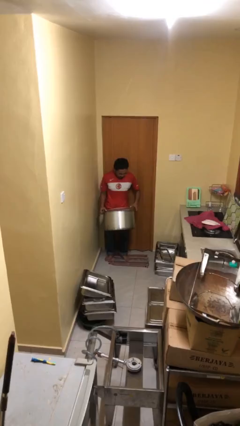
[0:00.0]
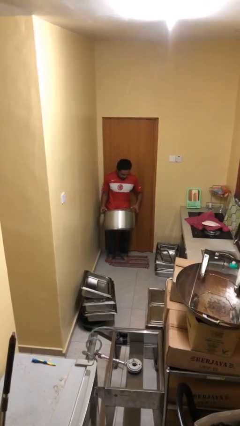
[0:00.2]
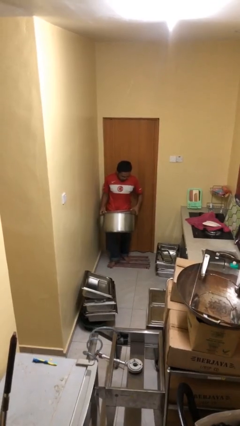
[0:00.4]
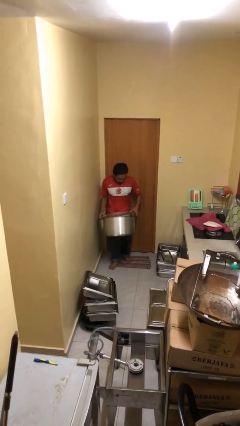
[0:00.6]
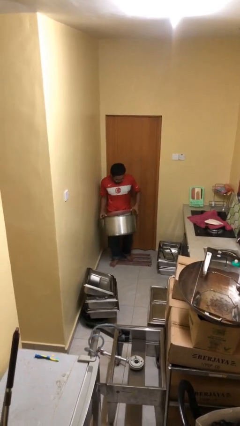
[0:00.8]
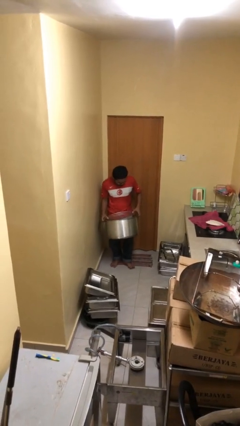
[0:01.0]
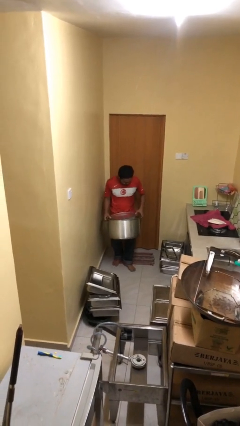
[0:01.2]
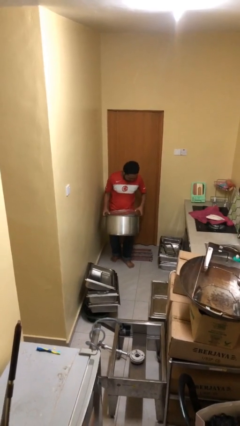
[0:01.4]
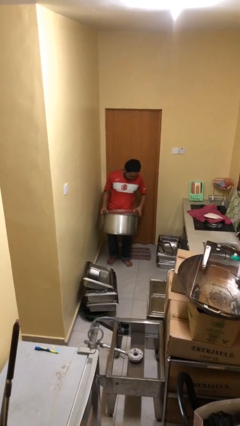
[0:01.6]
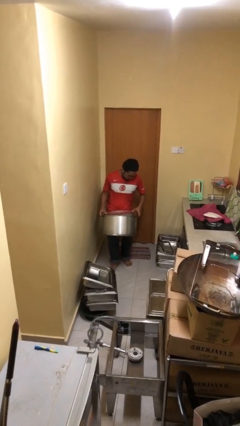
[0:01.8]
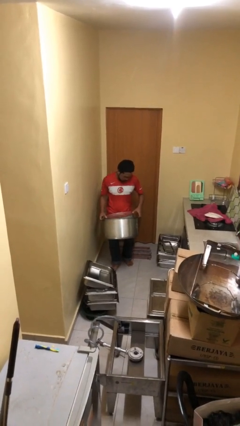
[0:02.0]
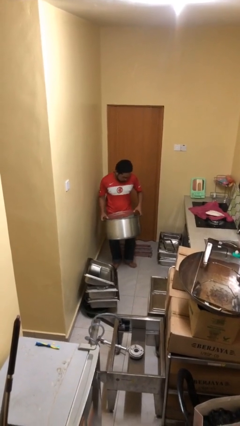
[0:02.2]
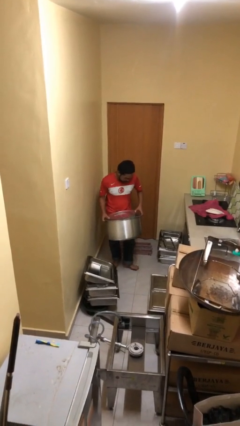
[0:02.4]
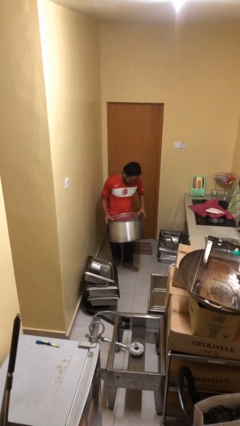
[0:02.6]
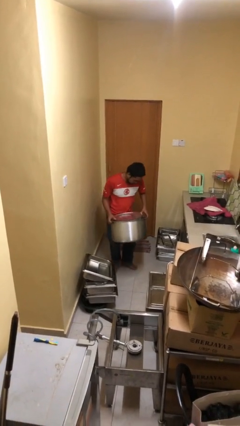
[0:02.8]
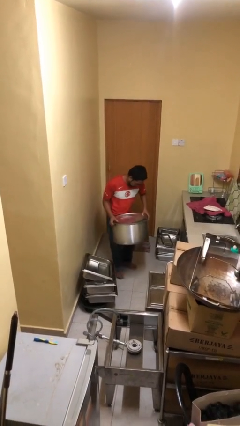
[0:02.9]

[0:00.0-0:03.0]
person carries heavy object

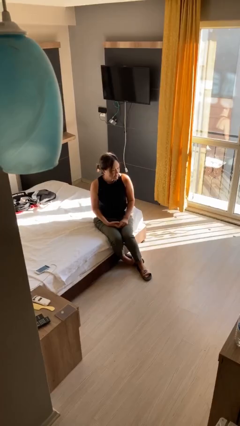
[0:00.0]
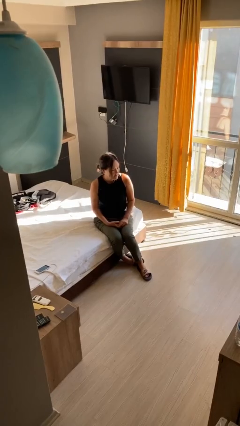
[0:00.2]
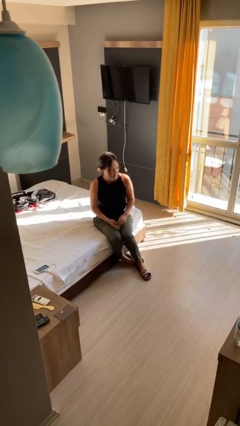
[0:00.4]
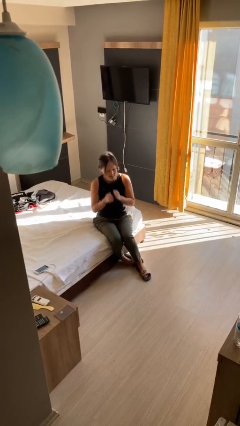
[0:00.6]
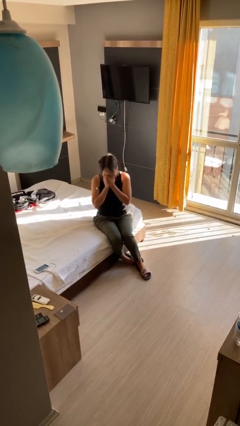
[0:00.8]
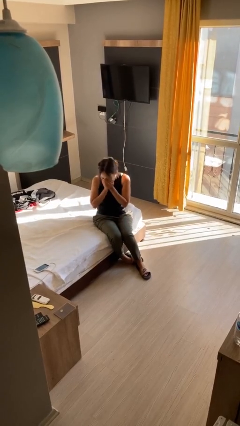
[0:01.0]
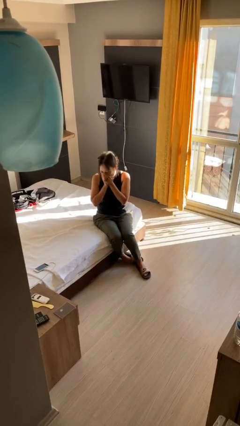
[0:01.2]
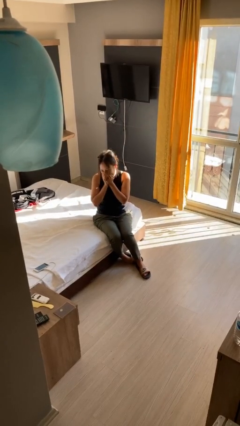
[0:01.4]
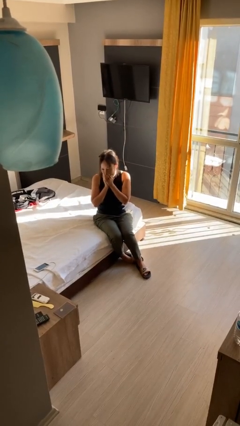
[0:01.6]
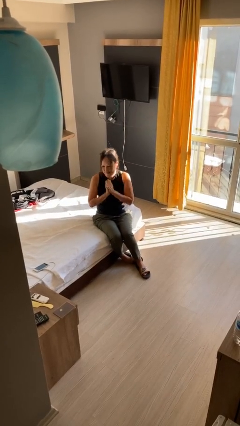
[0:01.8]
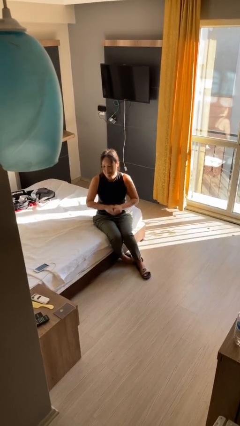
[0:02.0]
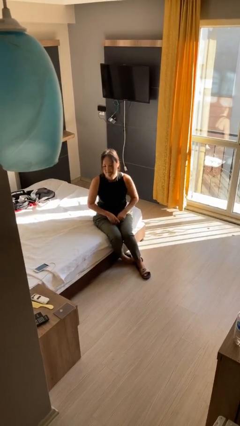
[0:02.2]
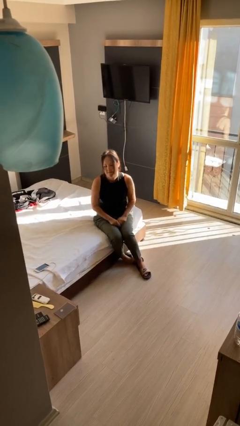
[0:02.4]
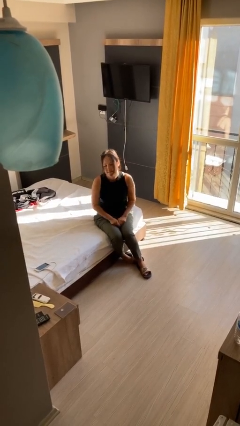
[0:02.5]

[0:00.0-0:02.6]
person sneezes into hand

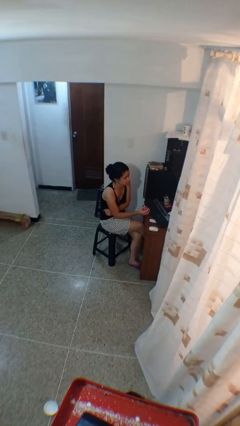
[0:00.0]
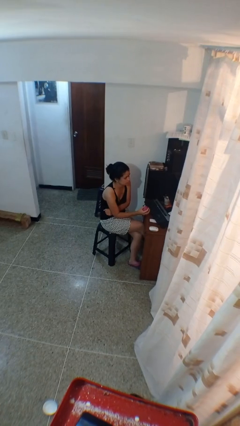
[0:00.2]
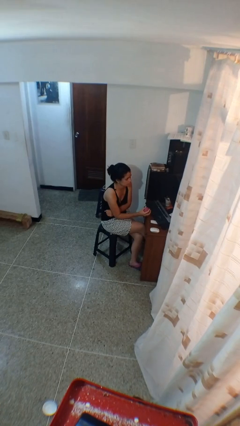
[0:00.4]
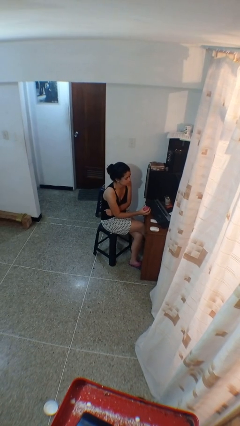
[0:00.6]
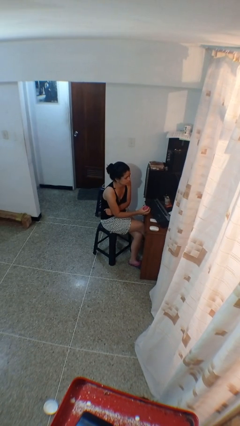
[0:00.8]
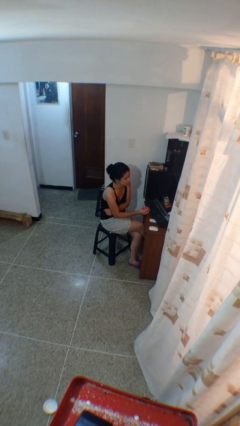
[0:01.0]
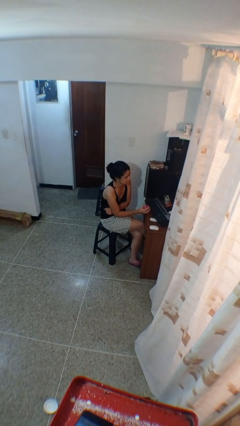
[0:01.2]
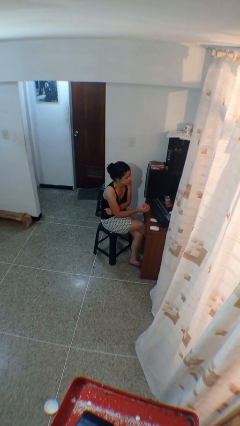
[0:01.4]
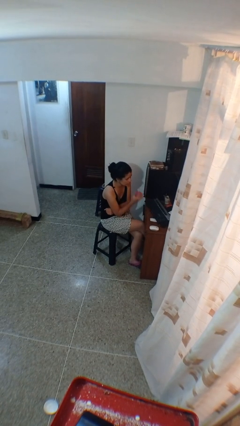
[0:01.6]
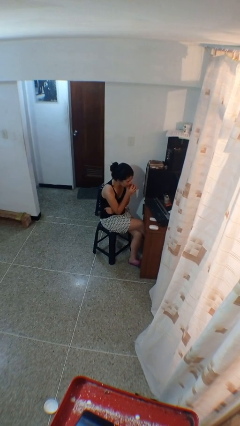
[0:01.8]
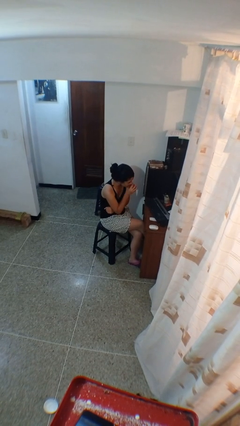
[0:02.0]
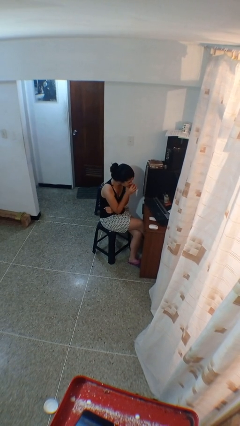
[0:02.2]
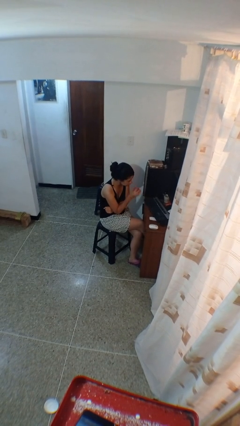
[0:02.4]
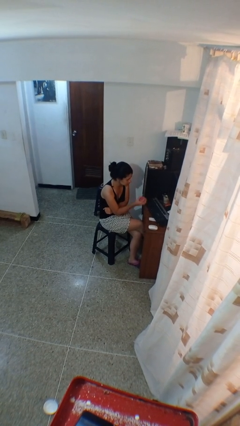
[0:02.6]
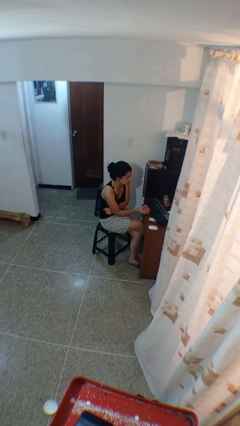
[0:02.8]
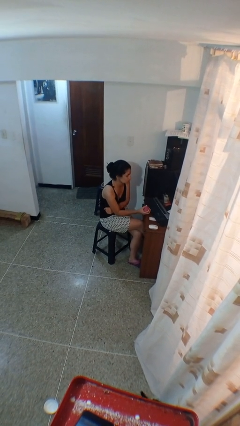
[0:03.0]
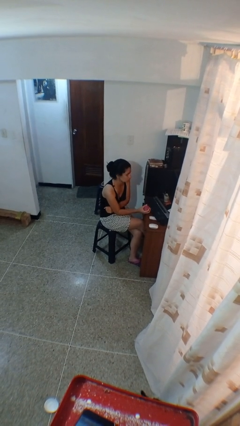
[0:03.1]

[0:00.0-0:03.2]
person eats apple

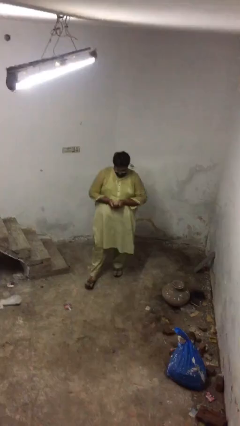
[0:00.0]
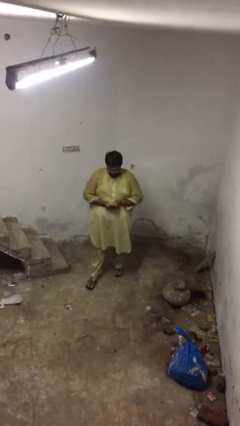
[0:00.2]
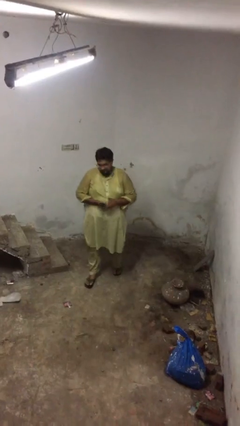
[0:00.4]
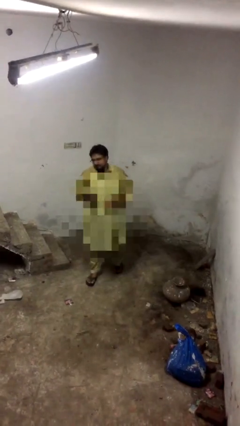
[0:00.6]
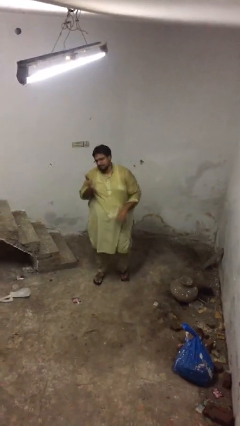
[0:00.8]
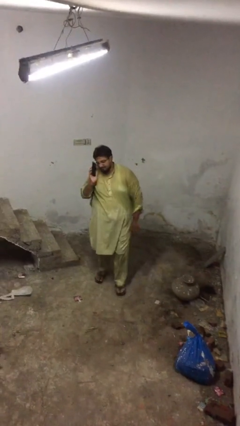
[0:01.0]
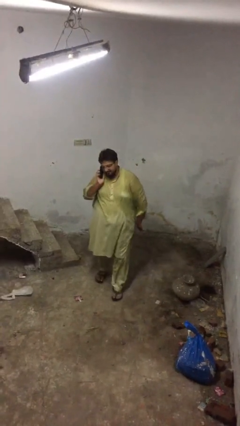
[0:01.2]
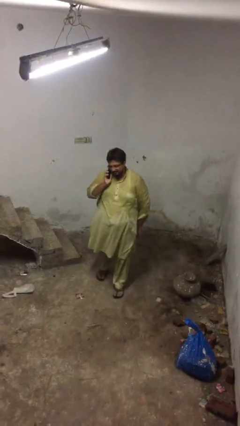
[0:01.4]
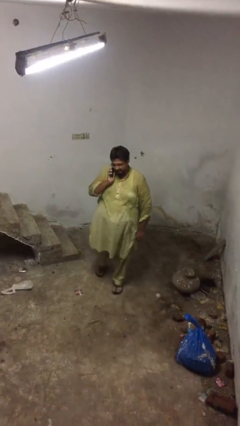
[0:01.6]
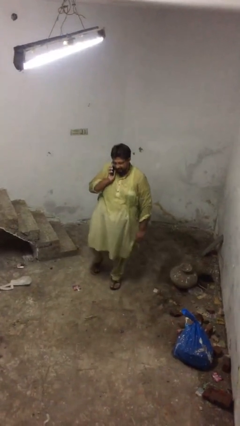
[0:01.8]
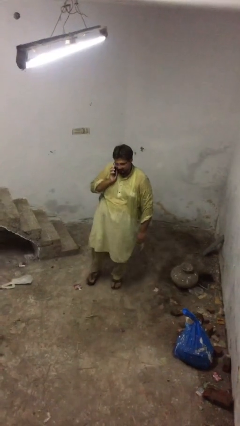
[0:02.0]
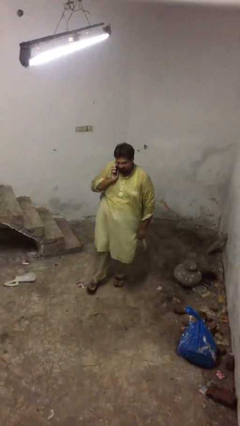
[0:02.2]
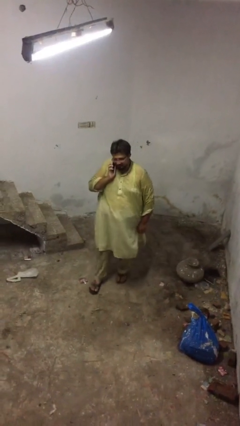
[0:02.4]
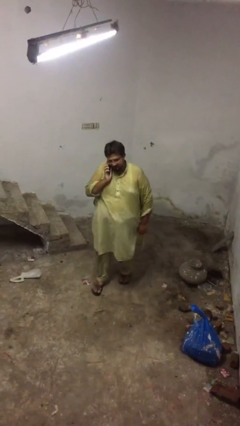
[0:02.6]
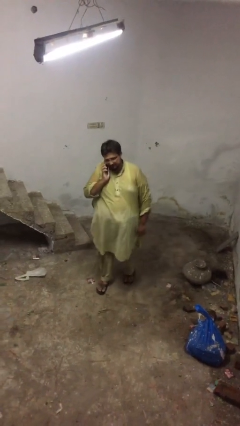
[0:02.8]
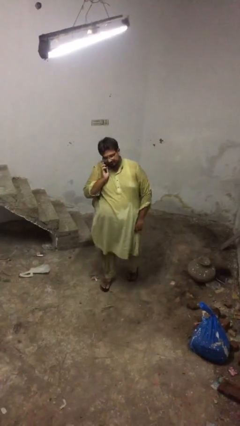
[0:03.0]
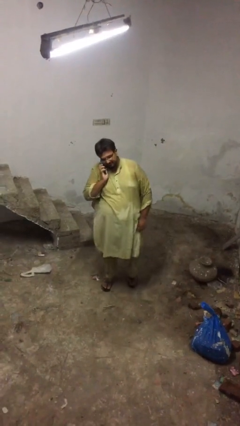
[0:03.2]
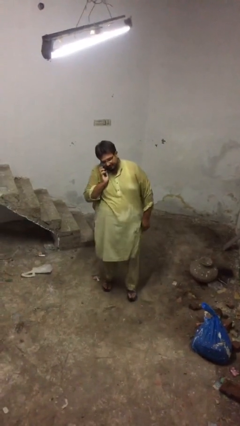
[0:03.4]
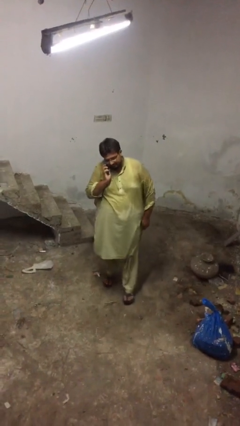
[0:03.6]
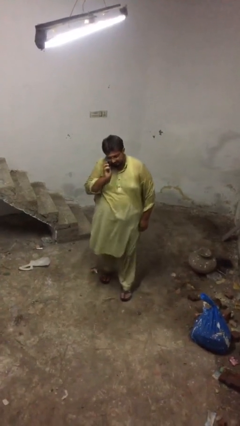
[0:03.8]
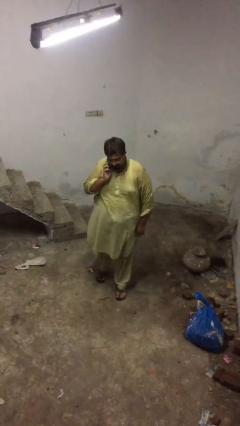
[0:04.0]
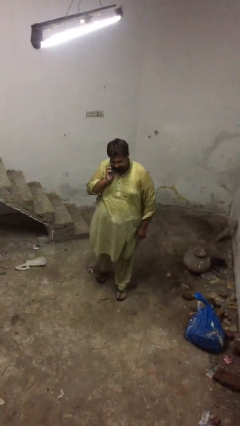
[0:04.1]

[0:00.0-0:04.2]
person talks on phone

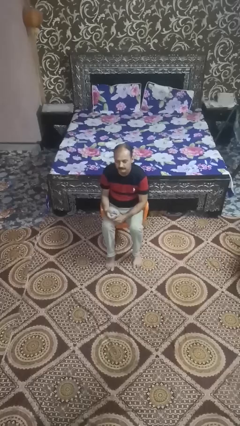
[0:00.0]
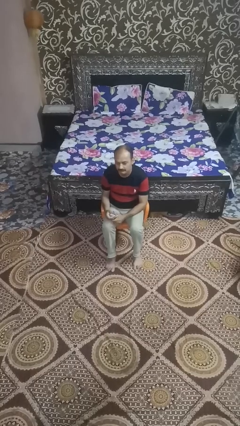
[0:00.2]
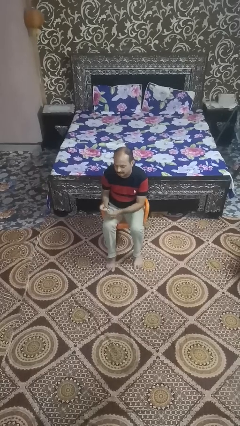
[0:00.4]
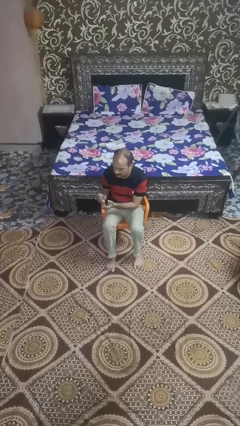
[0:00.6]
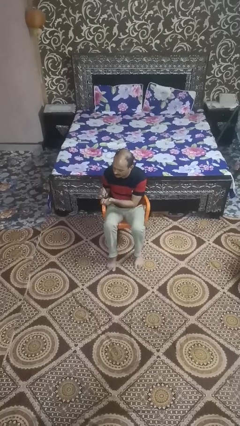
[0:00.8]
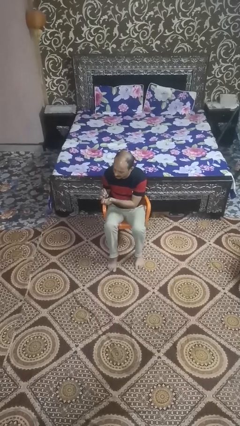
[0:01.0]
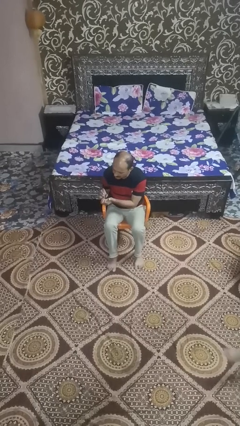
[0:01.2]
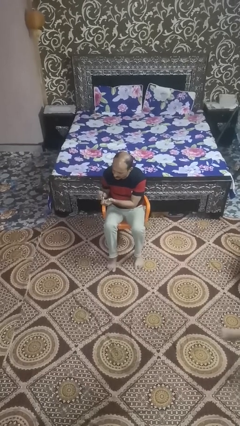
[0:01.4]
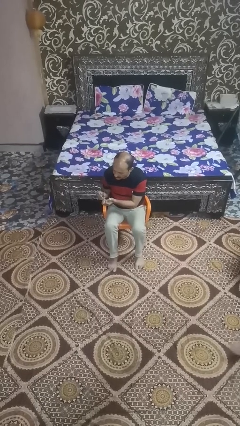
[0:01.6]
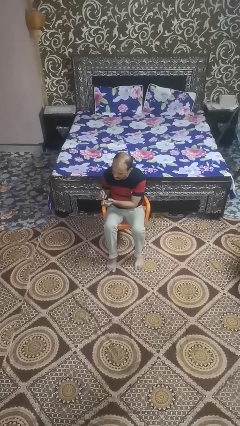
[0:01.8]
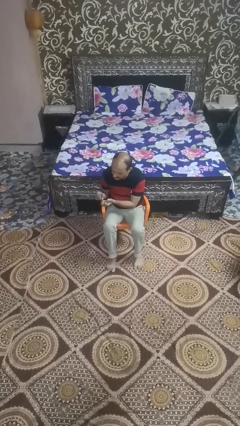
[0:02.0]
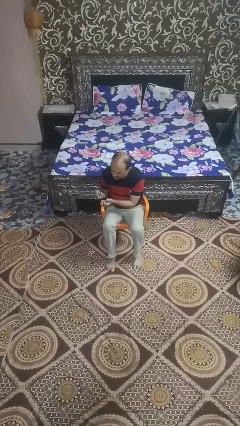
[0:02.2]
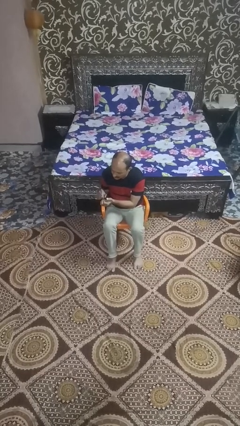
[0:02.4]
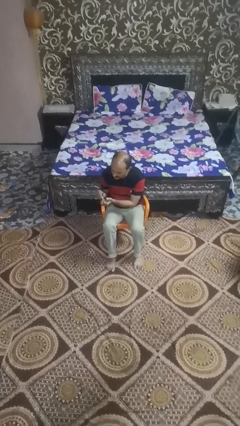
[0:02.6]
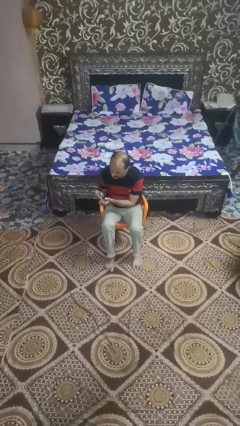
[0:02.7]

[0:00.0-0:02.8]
person clips fingernails

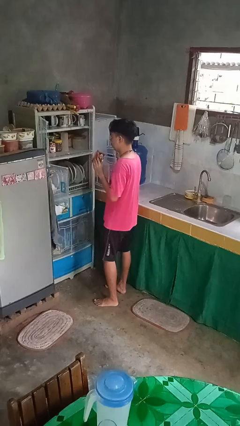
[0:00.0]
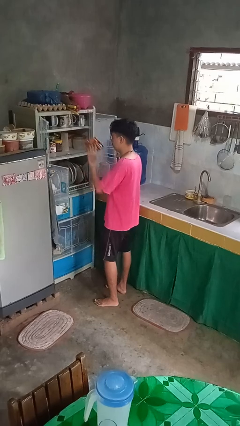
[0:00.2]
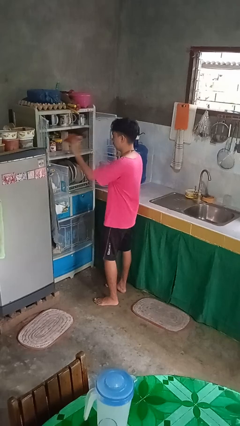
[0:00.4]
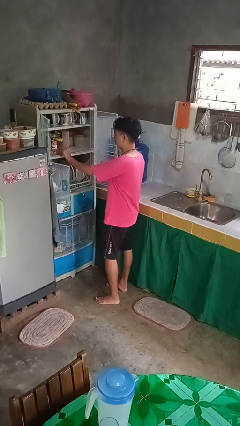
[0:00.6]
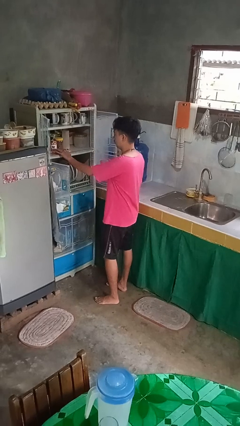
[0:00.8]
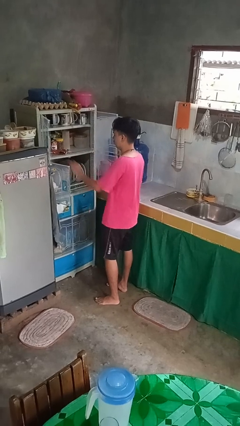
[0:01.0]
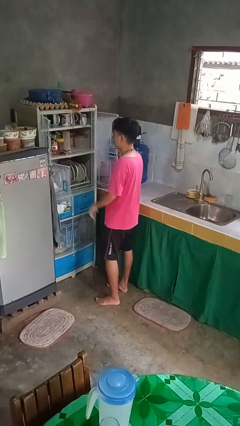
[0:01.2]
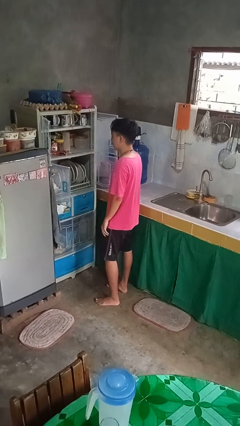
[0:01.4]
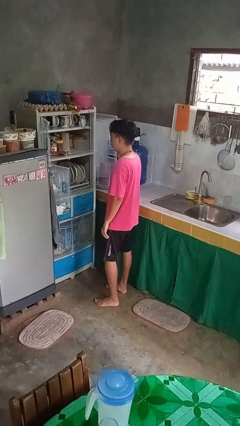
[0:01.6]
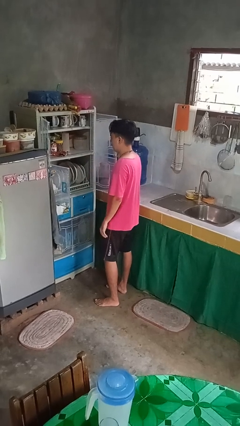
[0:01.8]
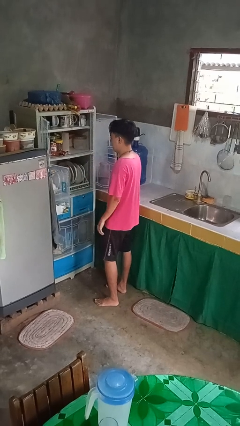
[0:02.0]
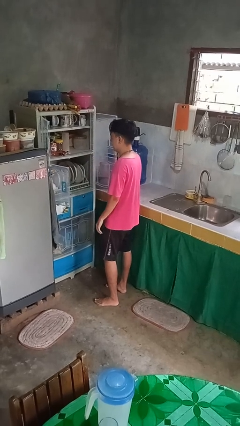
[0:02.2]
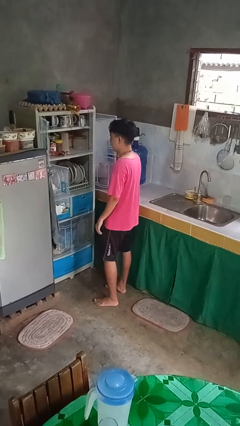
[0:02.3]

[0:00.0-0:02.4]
person puts object in cabinet
